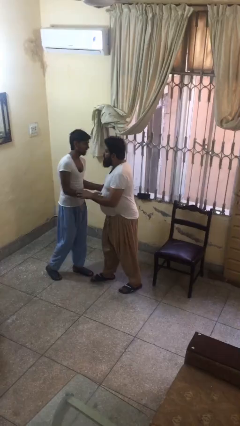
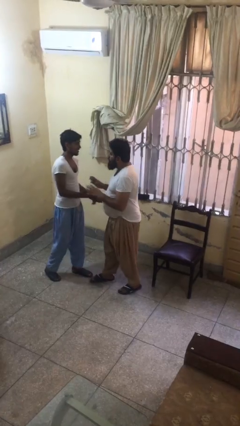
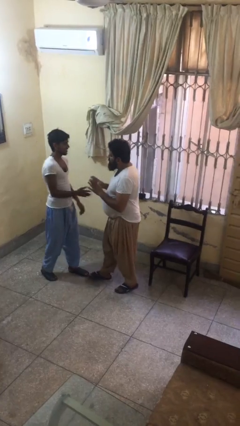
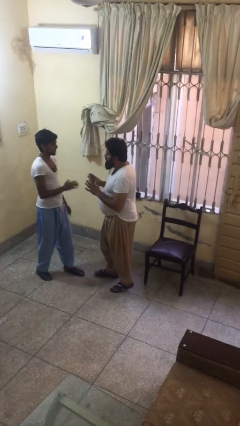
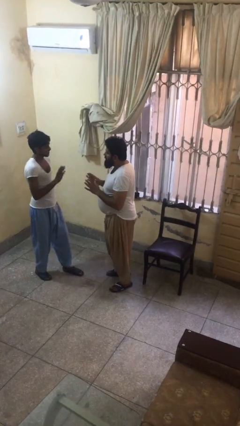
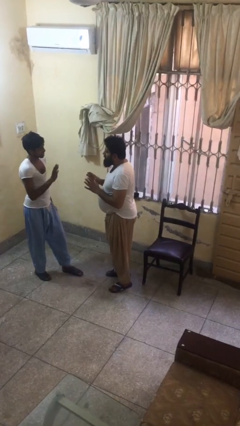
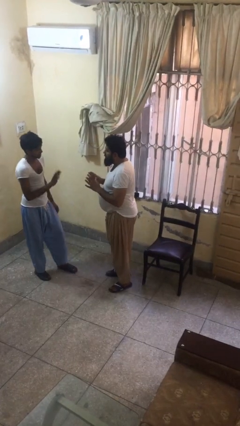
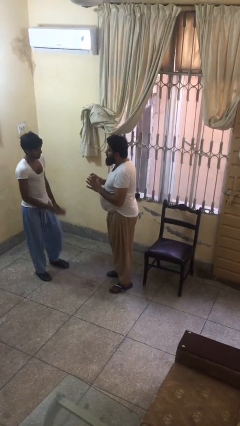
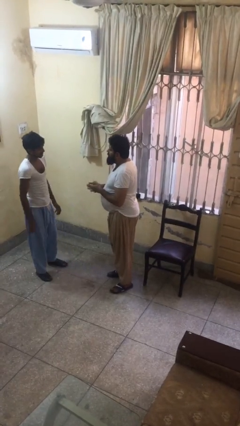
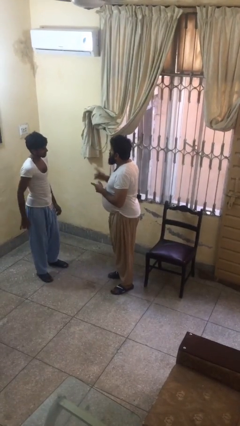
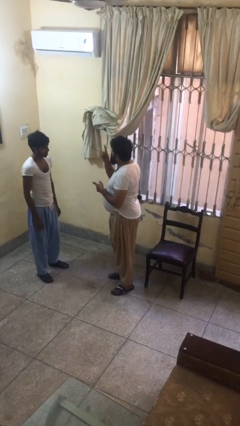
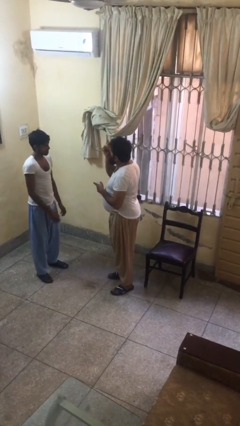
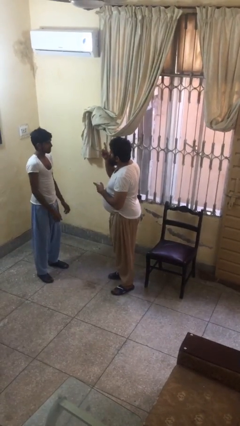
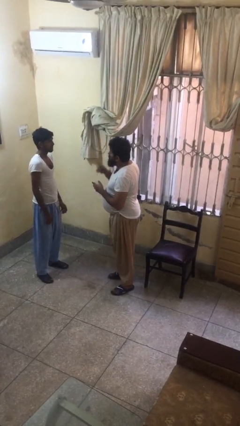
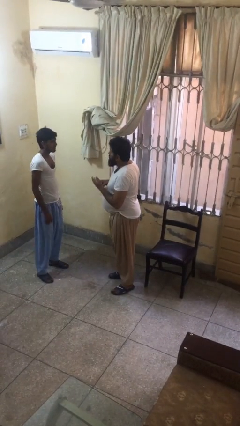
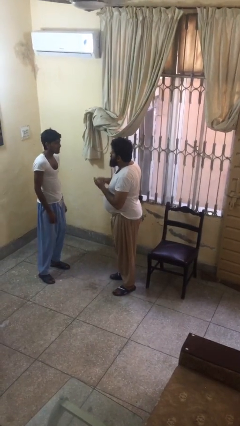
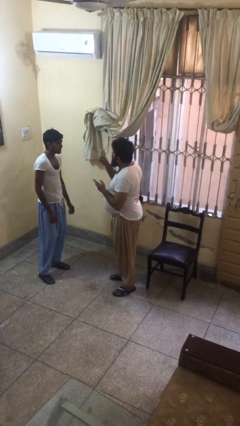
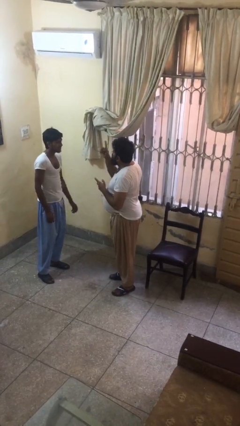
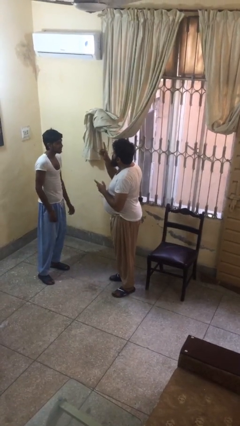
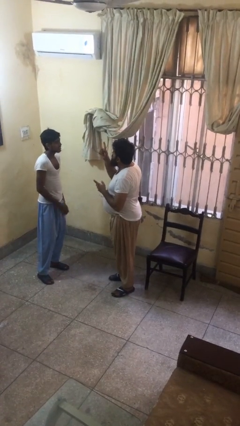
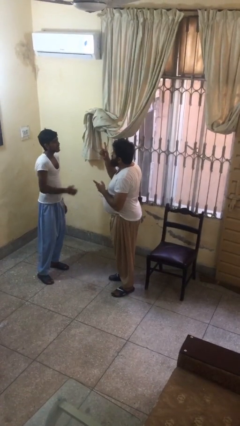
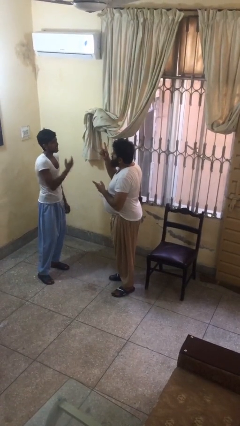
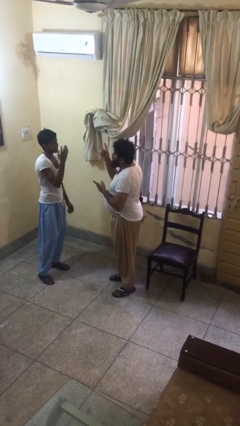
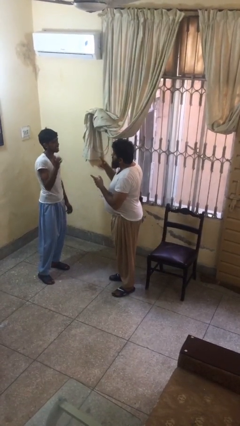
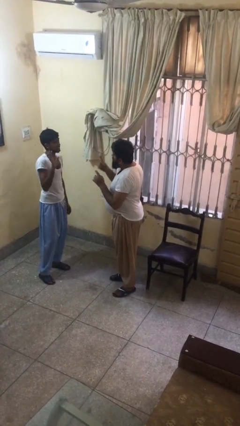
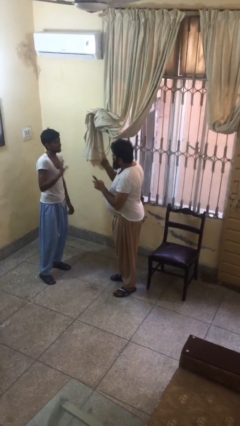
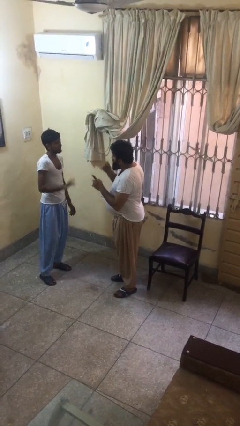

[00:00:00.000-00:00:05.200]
person talks to person

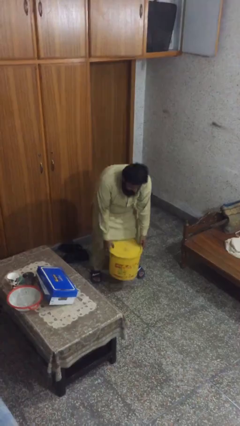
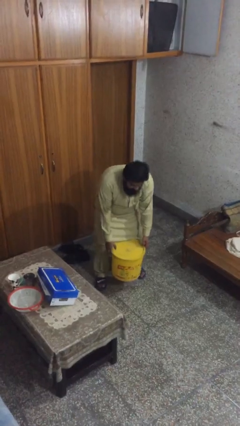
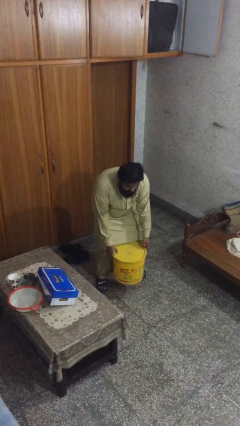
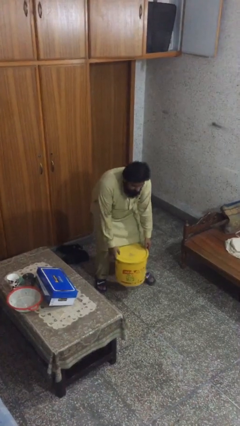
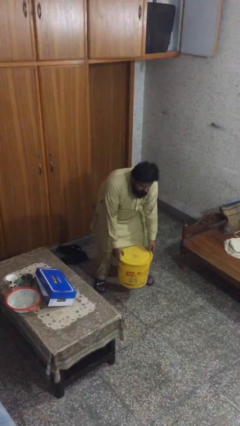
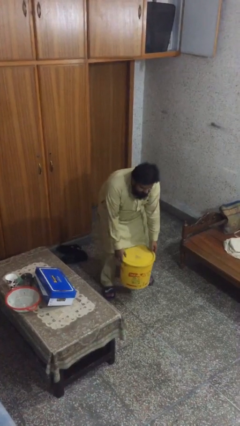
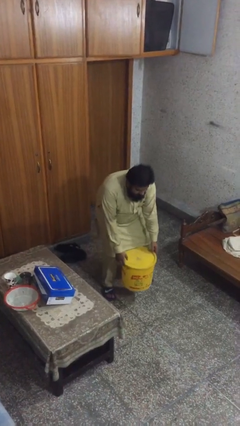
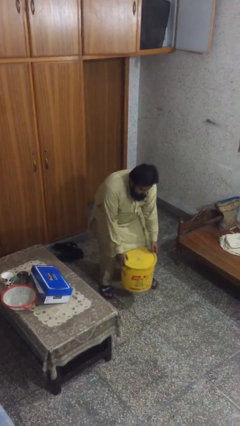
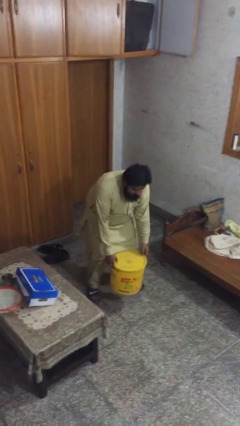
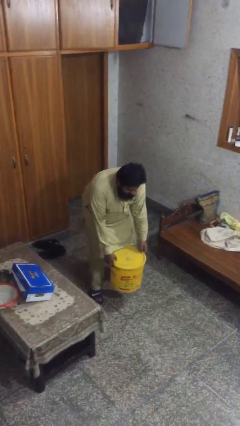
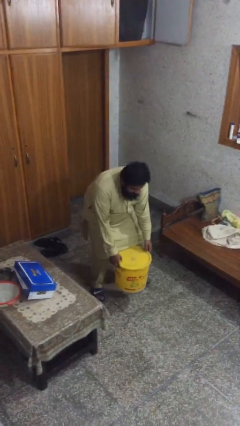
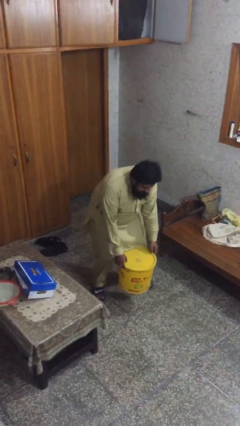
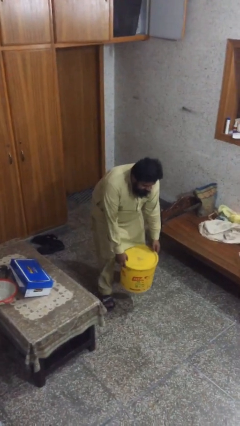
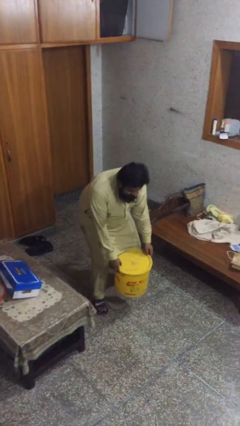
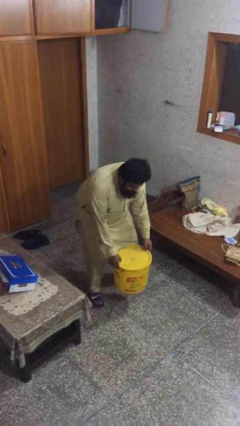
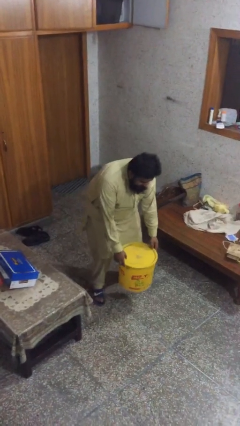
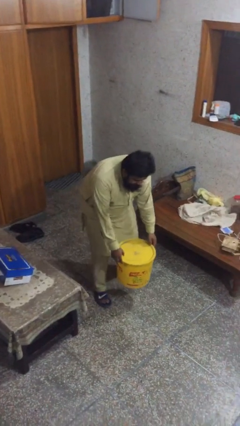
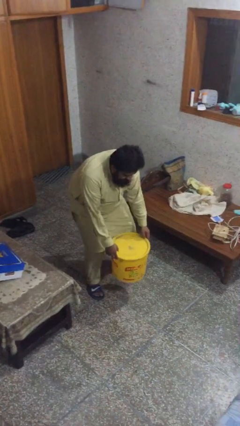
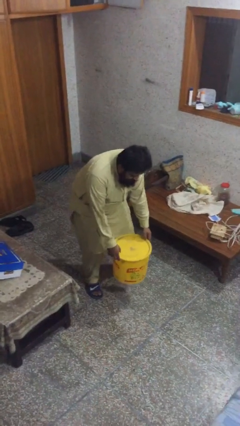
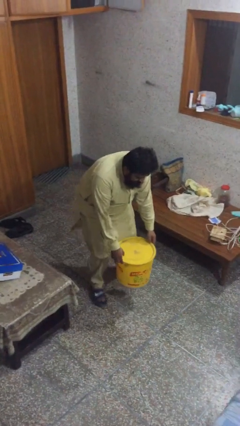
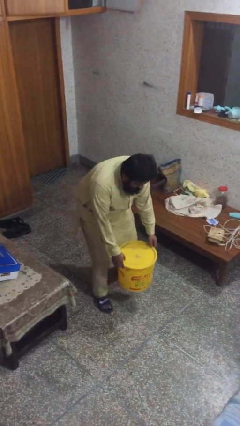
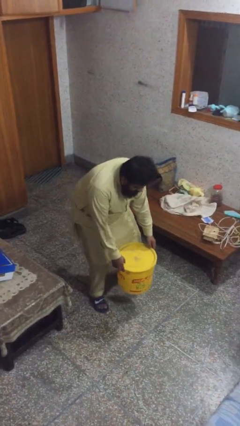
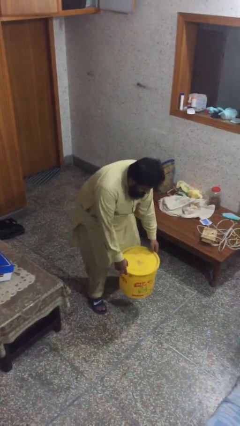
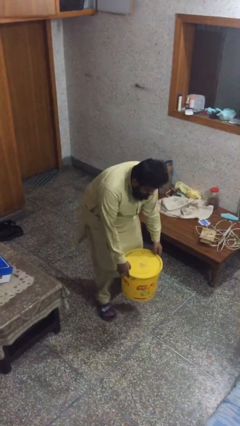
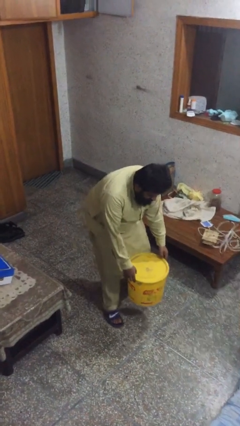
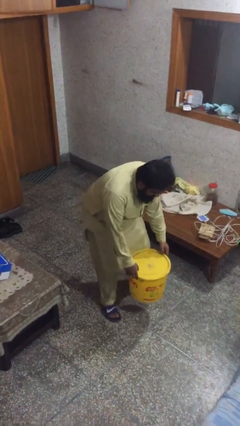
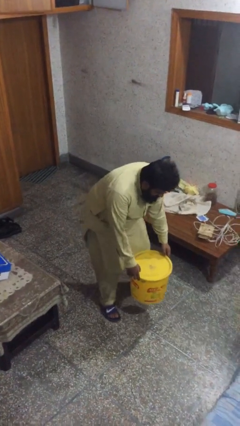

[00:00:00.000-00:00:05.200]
person carries heavy object

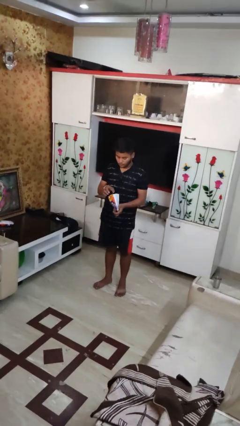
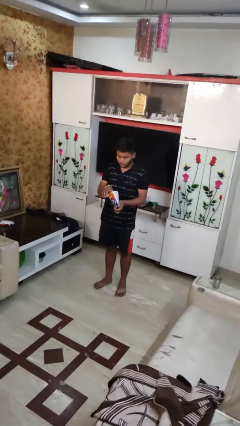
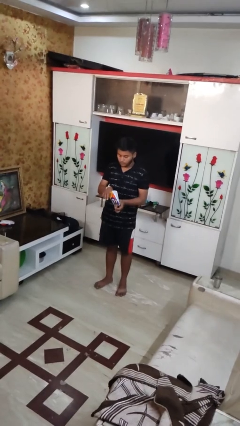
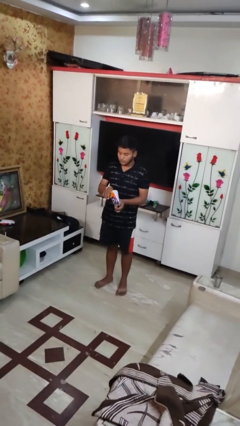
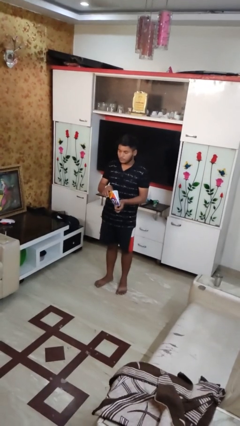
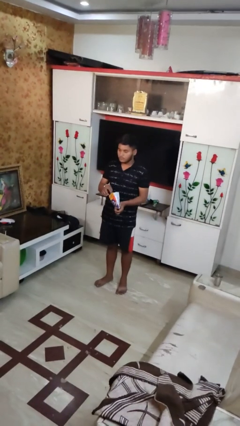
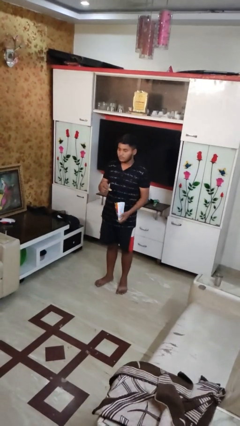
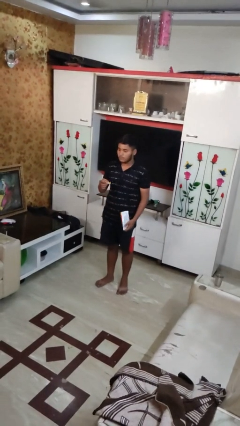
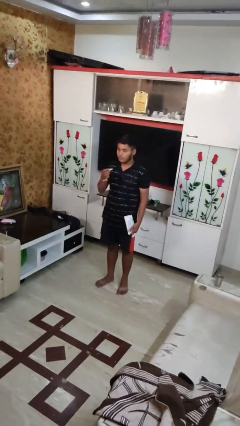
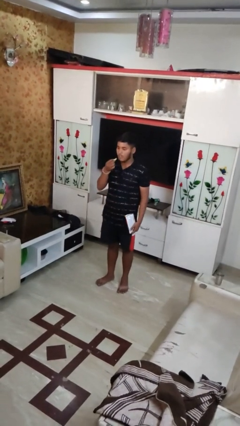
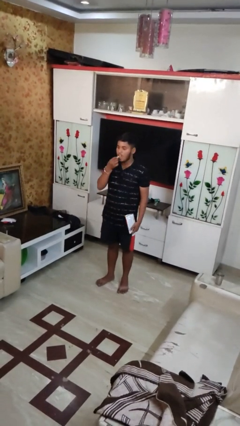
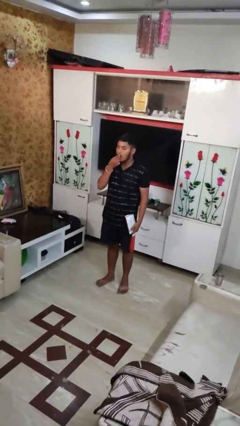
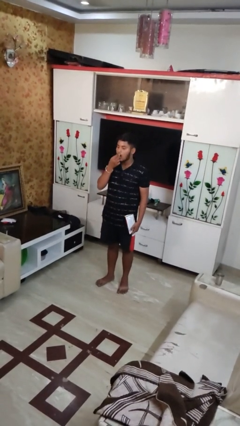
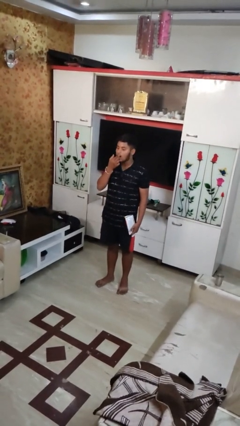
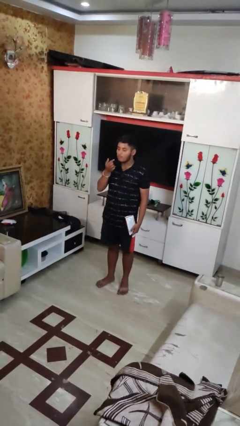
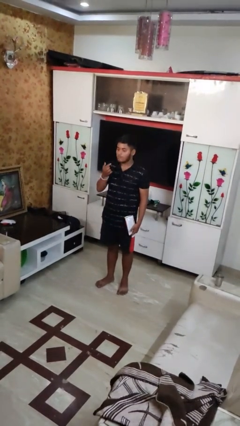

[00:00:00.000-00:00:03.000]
person eats snack from bag

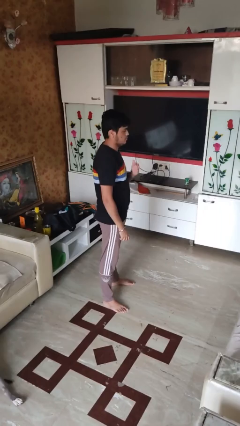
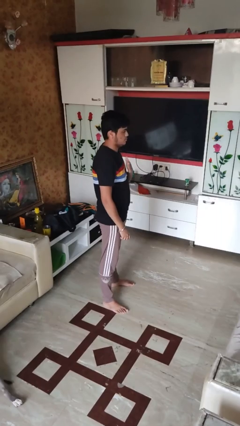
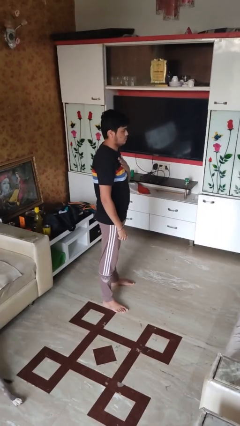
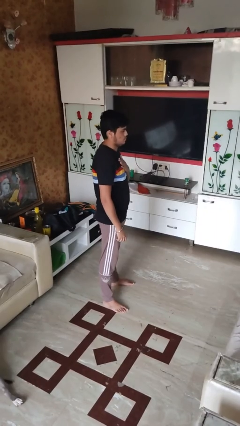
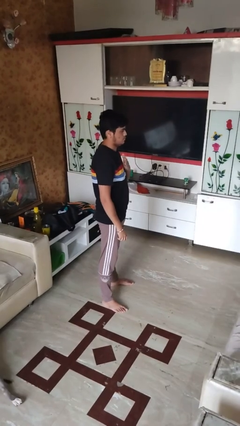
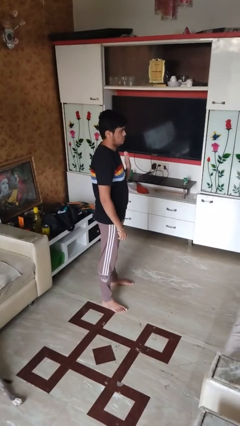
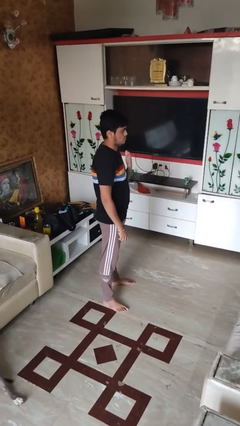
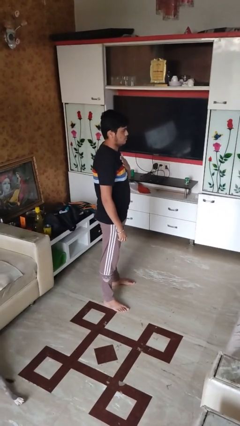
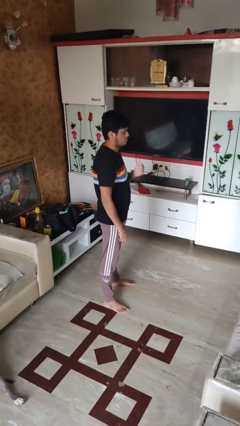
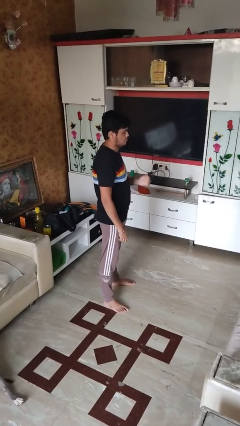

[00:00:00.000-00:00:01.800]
person drums on chest

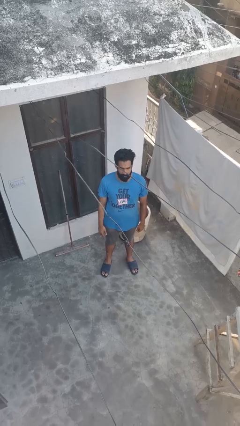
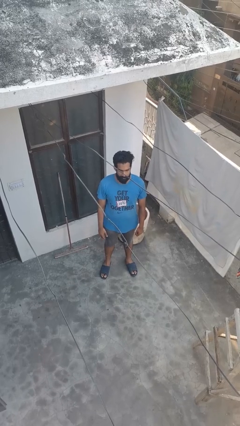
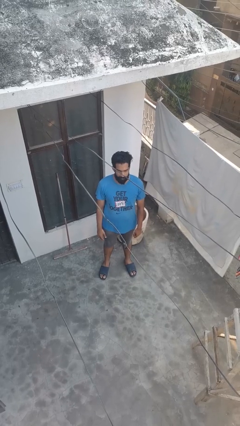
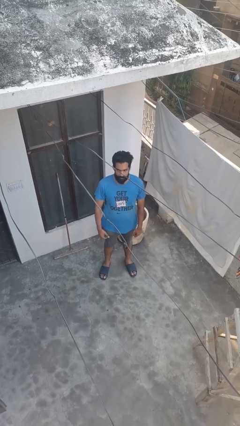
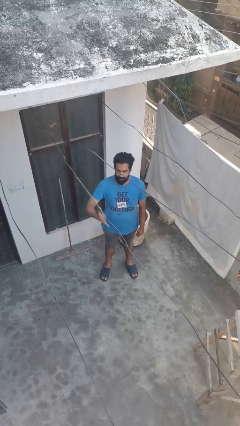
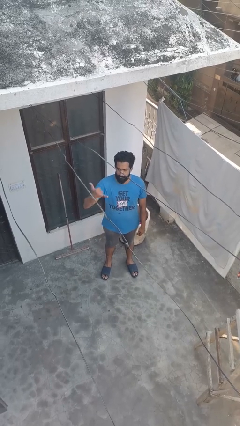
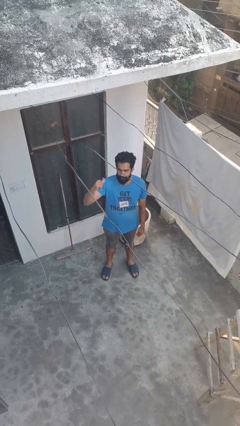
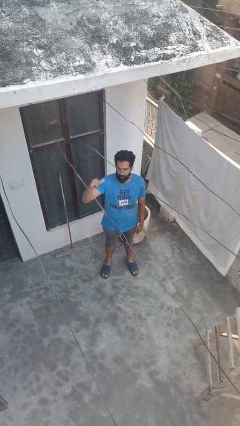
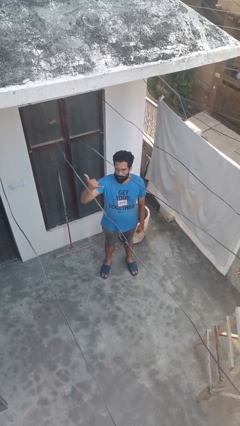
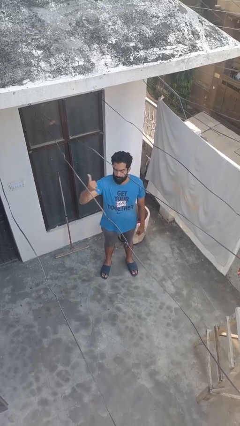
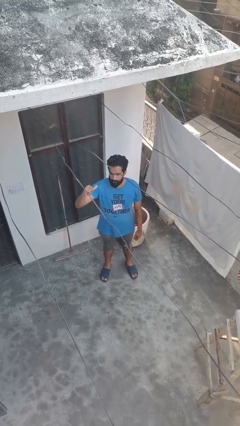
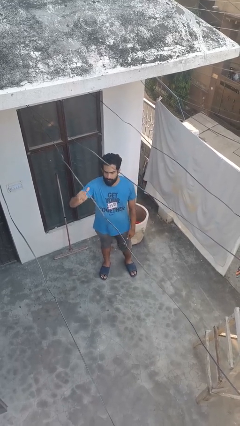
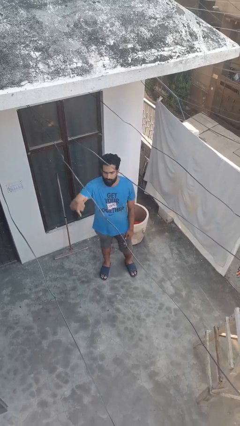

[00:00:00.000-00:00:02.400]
person gestures hang loose

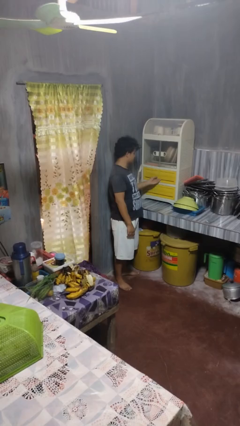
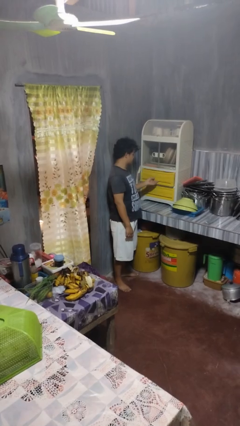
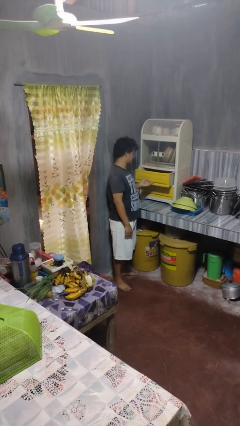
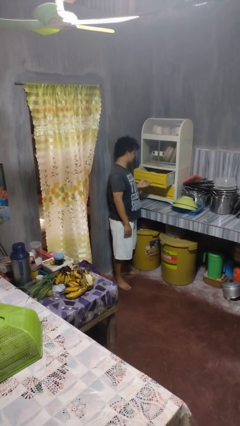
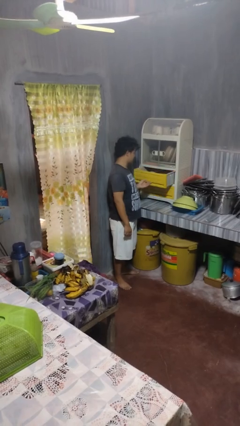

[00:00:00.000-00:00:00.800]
person opens kitchen drawer
